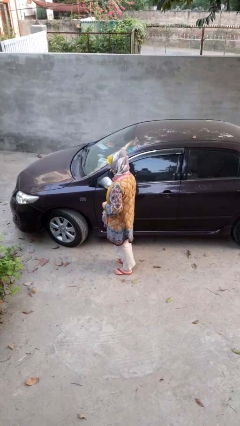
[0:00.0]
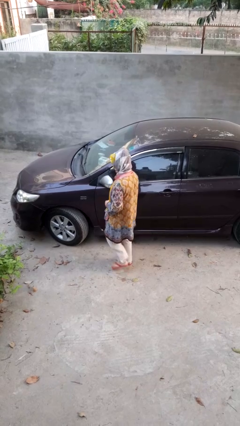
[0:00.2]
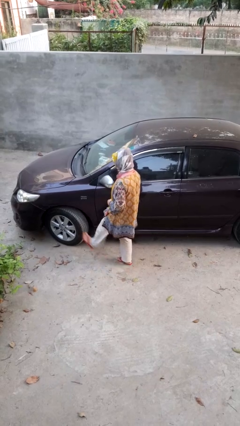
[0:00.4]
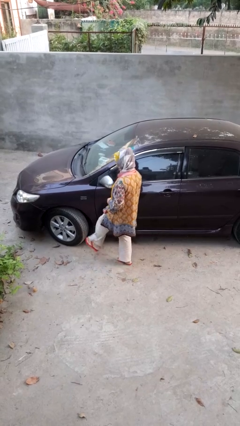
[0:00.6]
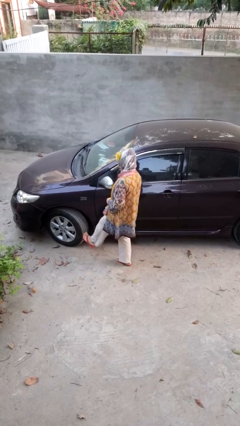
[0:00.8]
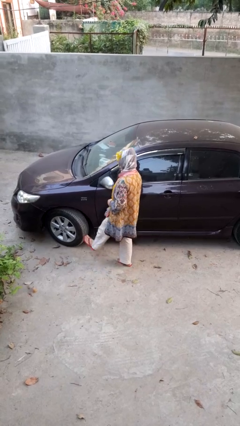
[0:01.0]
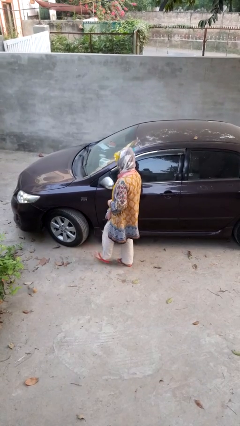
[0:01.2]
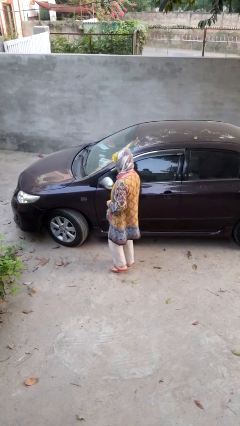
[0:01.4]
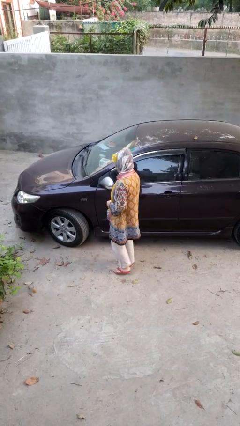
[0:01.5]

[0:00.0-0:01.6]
person kicks car tires

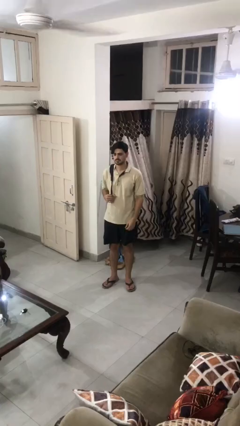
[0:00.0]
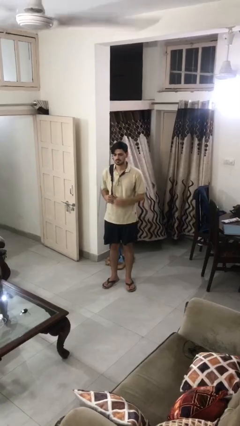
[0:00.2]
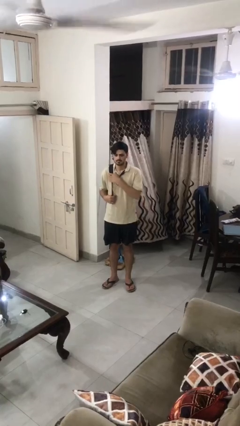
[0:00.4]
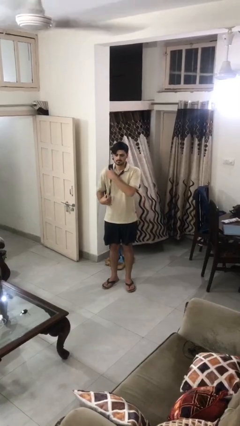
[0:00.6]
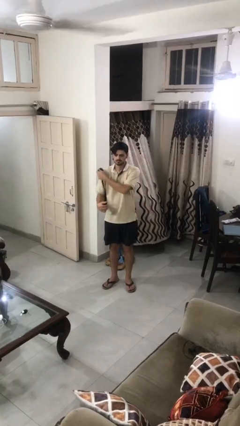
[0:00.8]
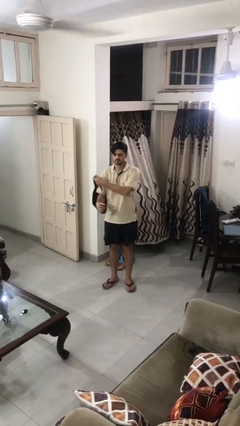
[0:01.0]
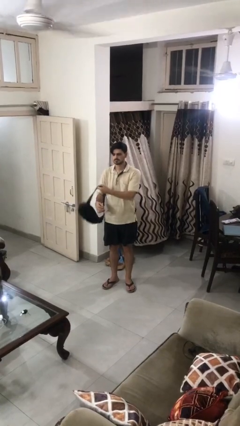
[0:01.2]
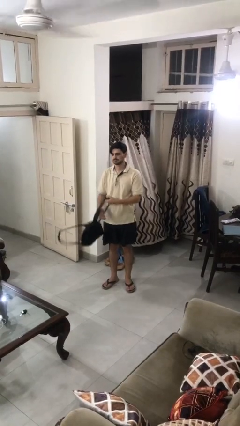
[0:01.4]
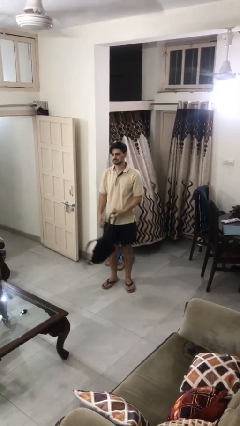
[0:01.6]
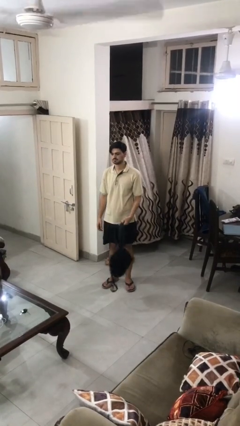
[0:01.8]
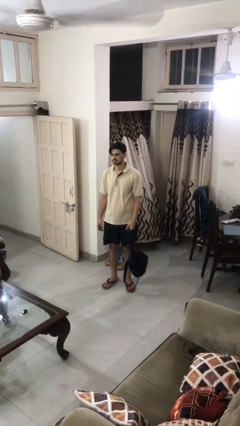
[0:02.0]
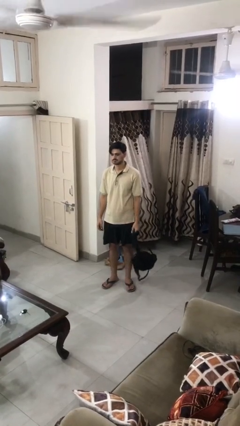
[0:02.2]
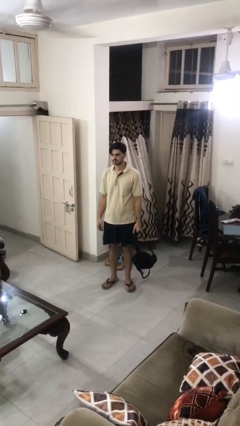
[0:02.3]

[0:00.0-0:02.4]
person takes off backpack

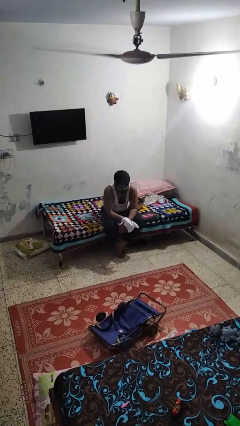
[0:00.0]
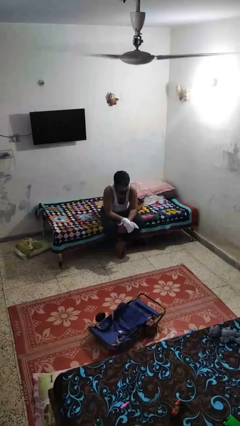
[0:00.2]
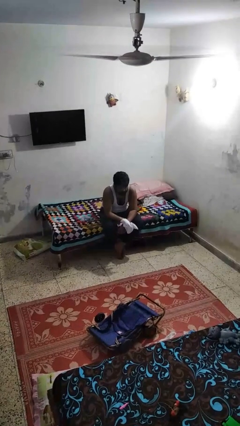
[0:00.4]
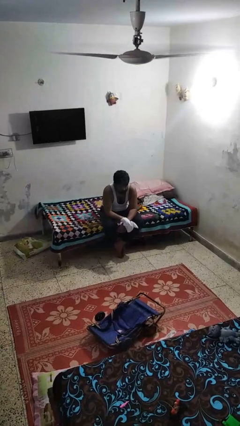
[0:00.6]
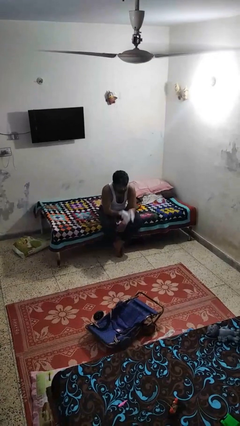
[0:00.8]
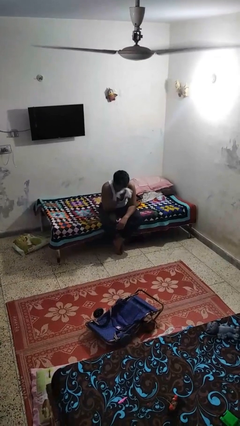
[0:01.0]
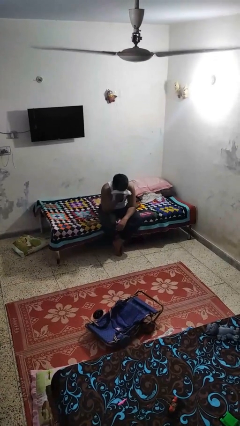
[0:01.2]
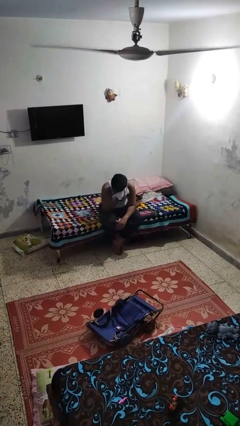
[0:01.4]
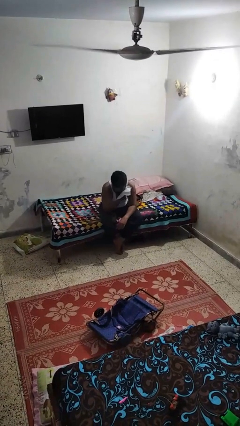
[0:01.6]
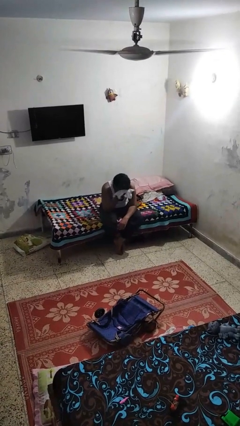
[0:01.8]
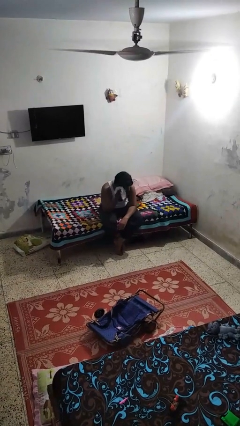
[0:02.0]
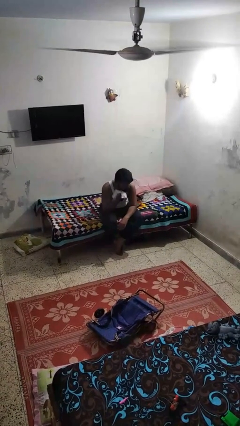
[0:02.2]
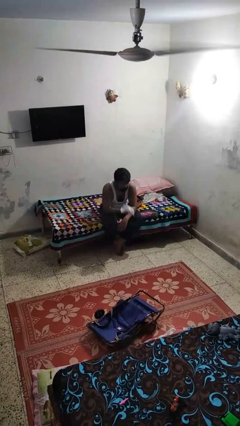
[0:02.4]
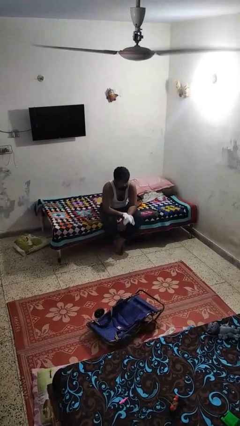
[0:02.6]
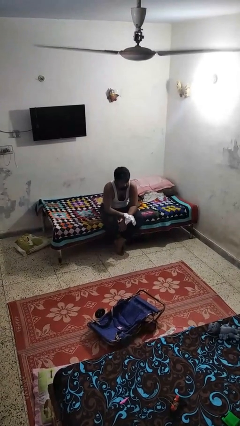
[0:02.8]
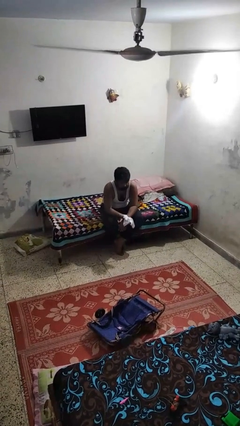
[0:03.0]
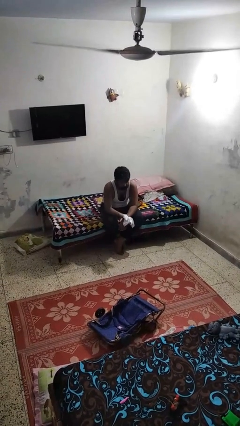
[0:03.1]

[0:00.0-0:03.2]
person wipes mouth with napkin

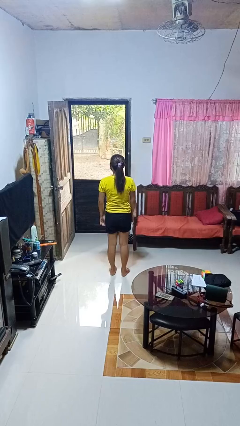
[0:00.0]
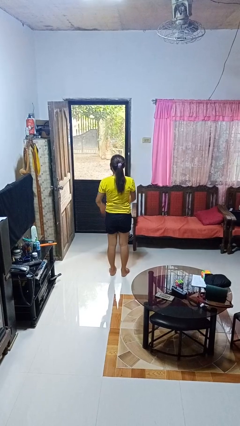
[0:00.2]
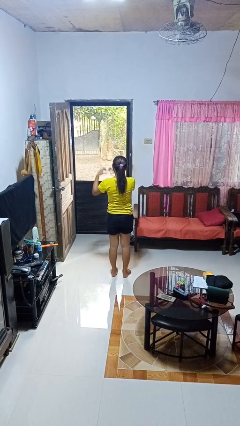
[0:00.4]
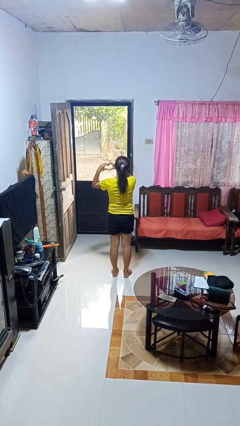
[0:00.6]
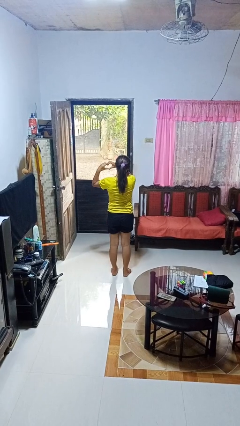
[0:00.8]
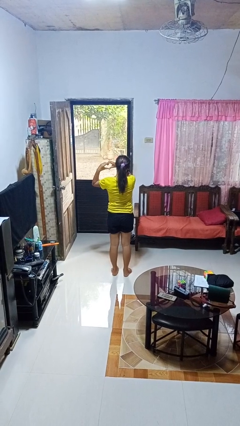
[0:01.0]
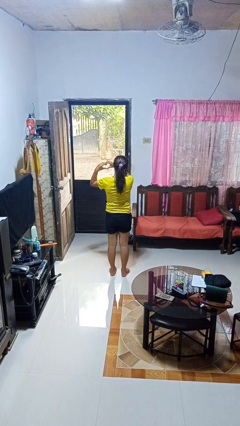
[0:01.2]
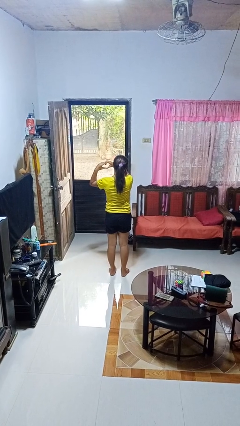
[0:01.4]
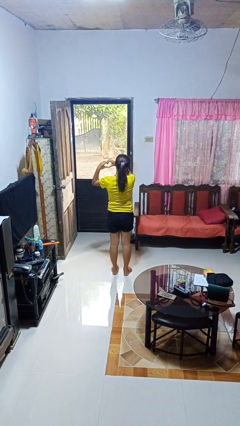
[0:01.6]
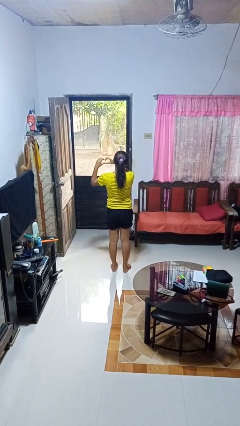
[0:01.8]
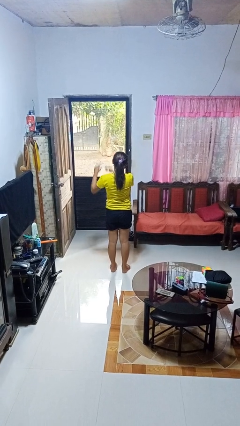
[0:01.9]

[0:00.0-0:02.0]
person gestures heart

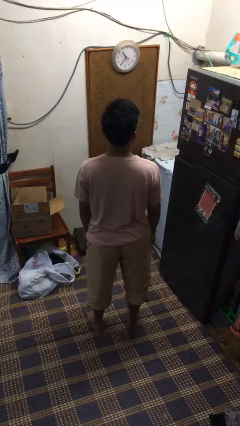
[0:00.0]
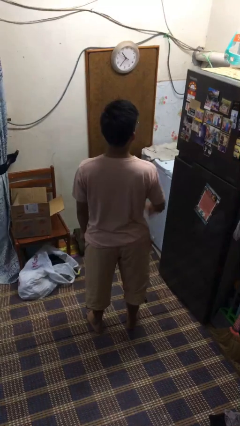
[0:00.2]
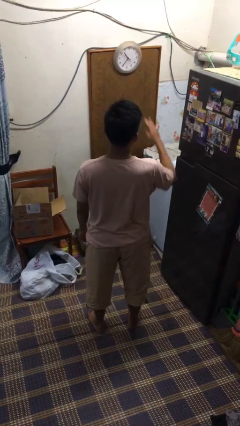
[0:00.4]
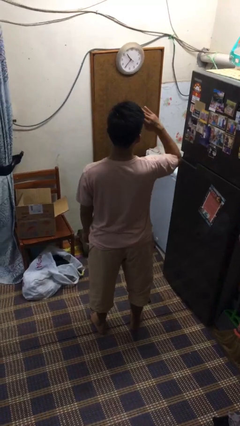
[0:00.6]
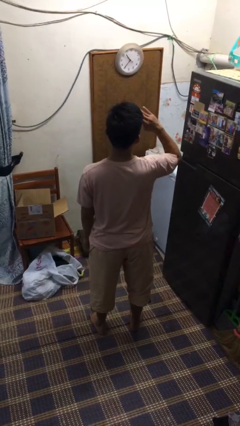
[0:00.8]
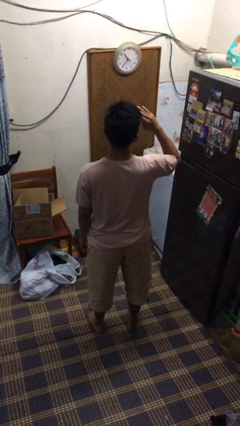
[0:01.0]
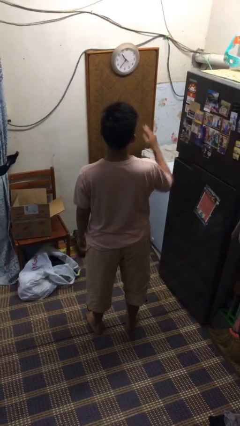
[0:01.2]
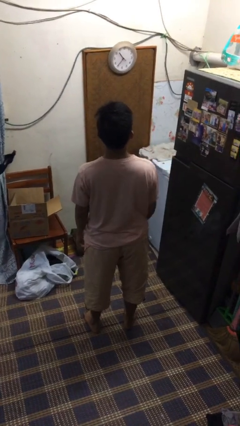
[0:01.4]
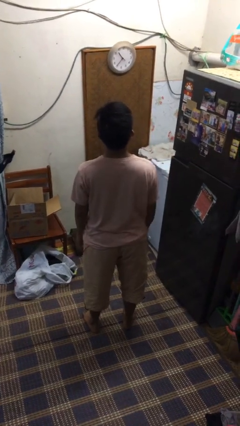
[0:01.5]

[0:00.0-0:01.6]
person salutes

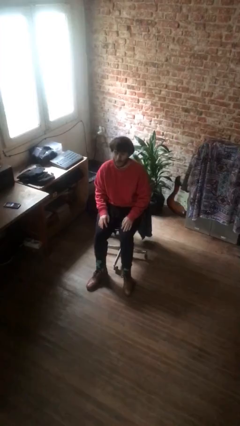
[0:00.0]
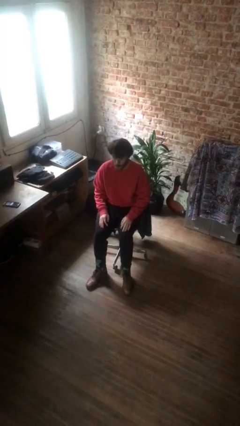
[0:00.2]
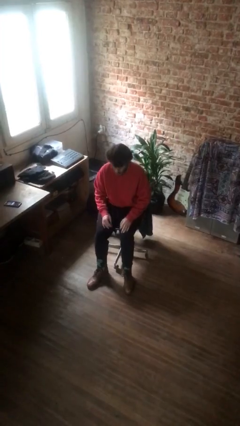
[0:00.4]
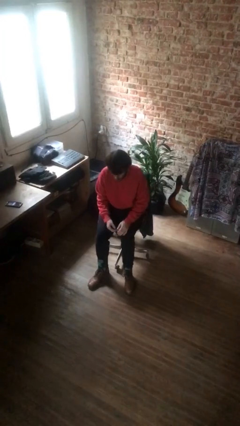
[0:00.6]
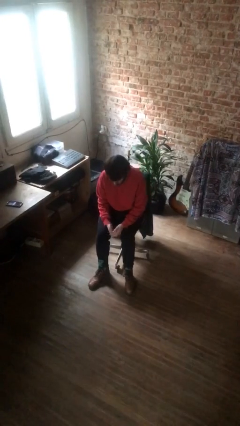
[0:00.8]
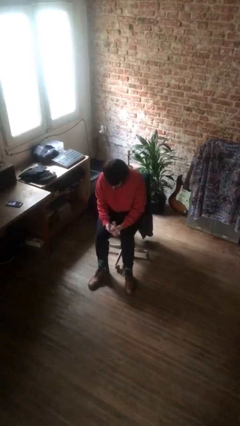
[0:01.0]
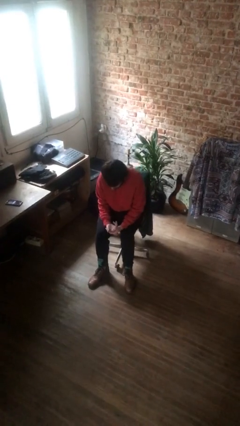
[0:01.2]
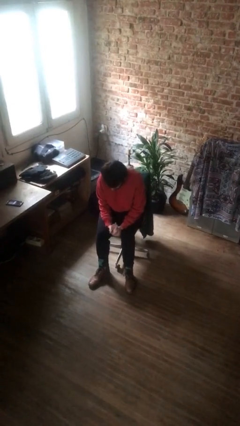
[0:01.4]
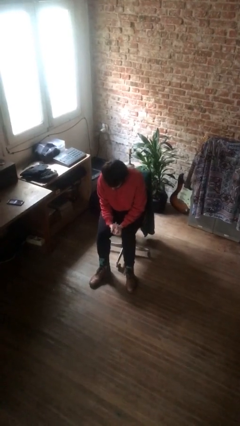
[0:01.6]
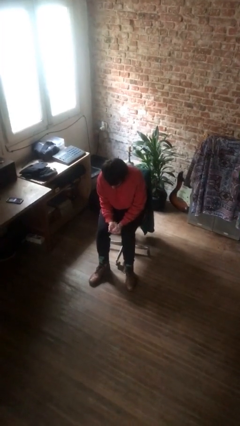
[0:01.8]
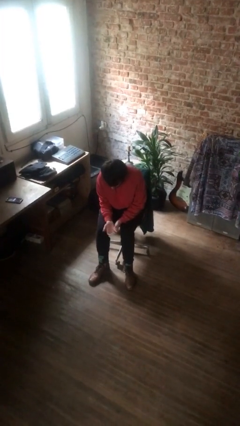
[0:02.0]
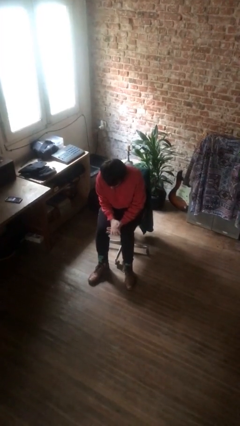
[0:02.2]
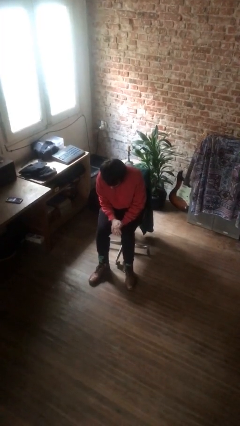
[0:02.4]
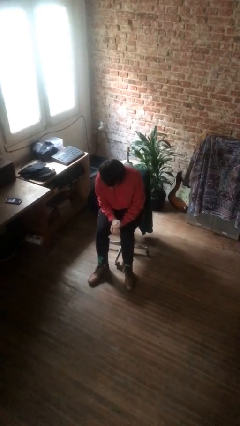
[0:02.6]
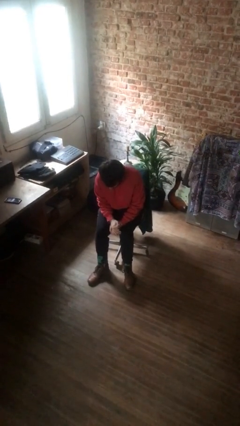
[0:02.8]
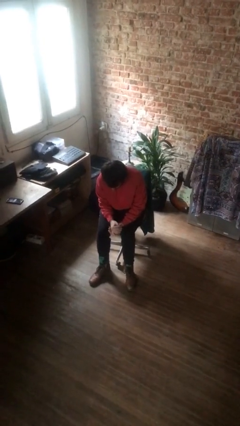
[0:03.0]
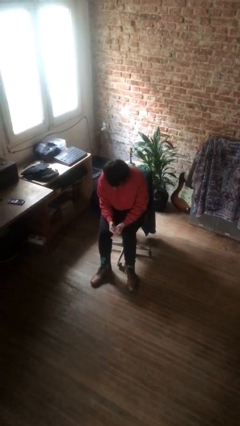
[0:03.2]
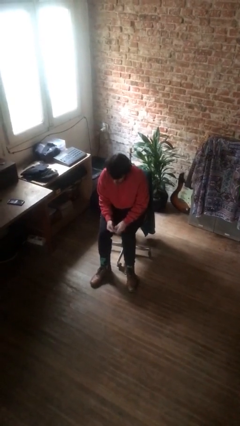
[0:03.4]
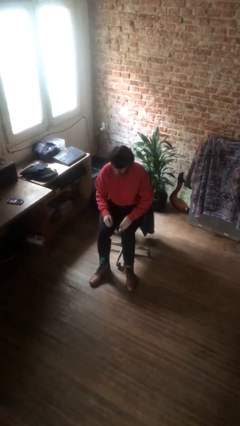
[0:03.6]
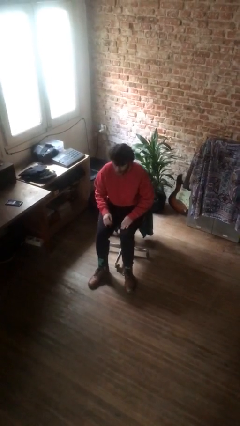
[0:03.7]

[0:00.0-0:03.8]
person looks at hands in lap

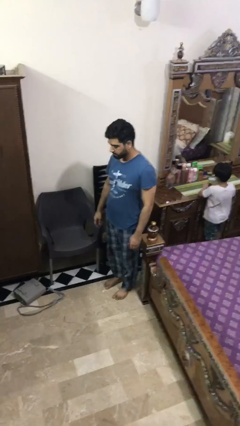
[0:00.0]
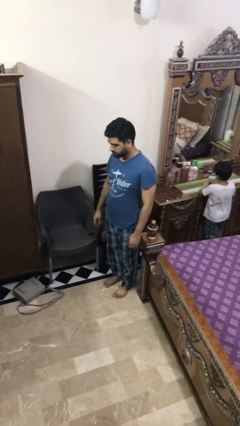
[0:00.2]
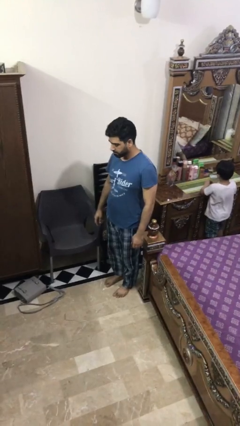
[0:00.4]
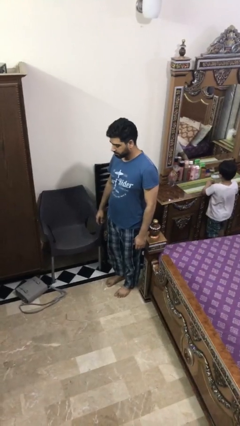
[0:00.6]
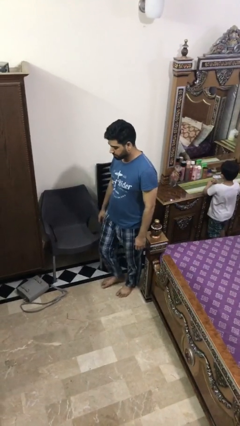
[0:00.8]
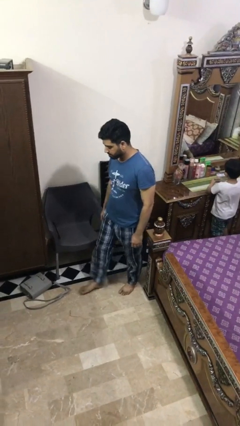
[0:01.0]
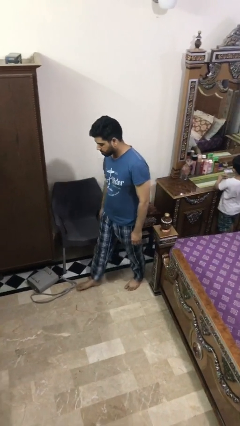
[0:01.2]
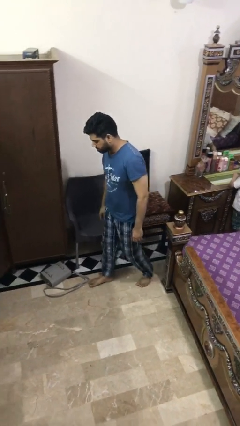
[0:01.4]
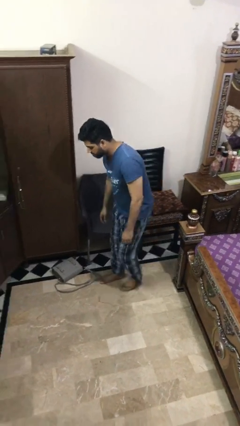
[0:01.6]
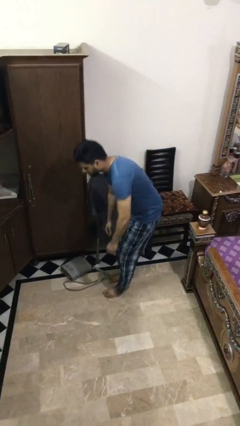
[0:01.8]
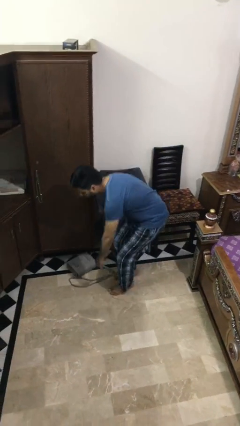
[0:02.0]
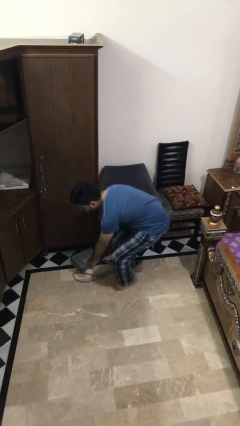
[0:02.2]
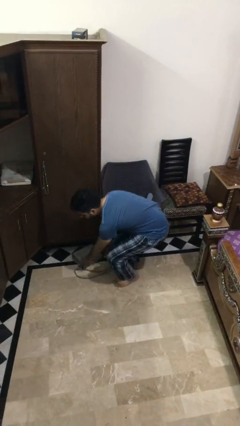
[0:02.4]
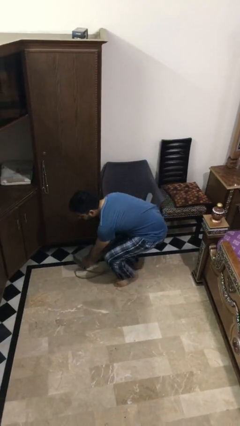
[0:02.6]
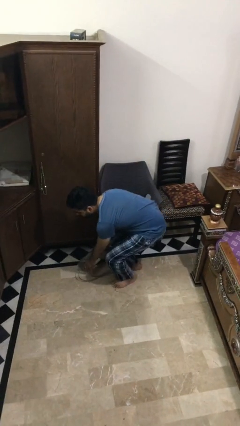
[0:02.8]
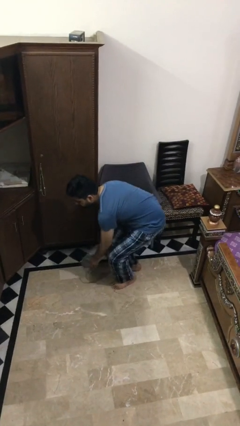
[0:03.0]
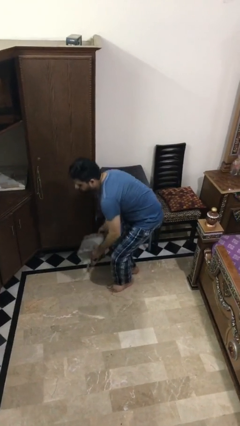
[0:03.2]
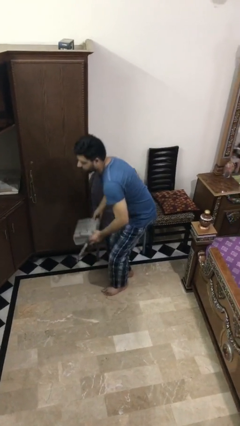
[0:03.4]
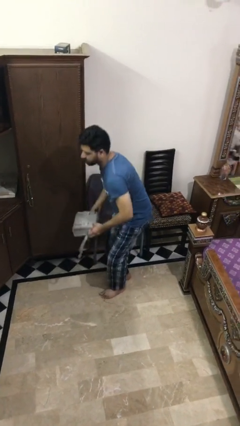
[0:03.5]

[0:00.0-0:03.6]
person picks up object from floor
